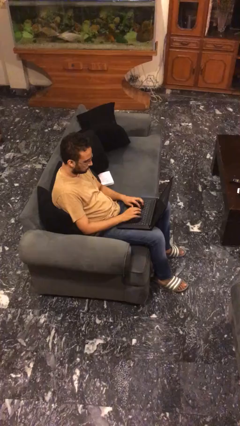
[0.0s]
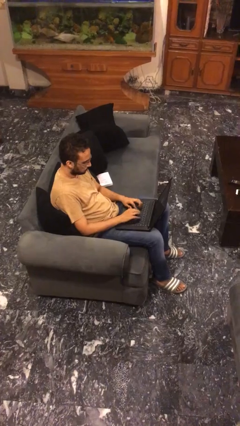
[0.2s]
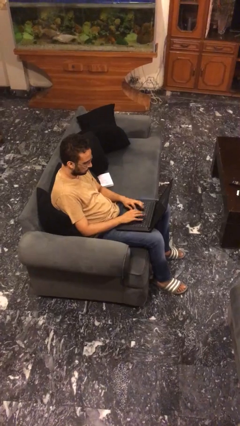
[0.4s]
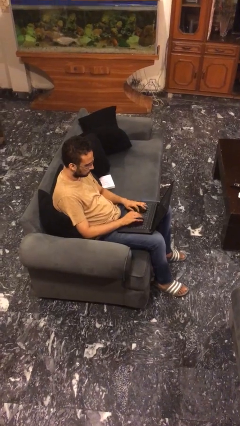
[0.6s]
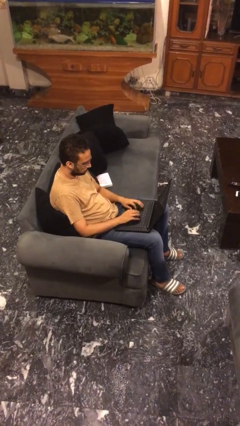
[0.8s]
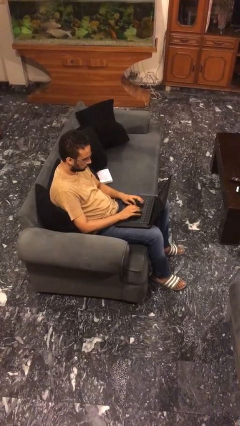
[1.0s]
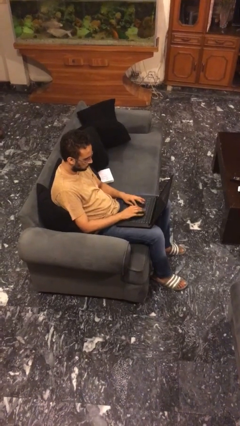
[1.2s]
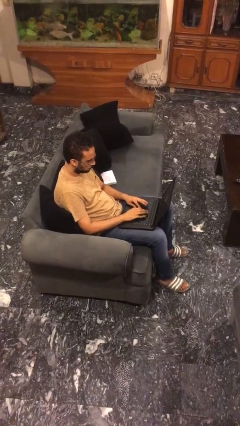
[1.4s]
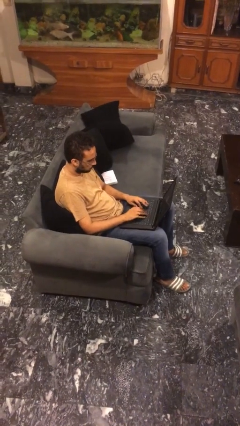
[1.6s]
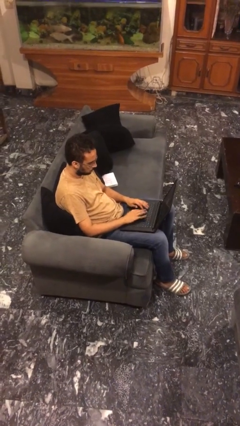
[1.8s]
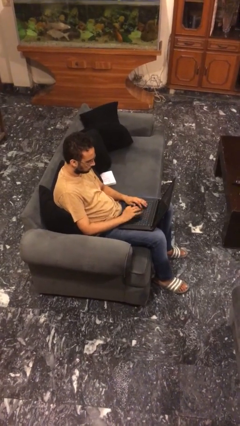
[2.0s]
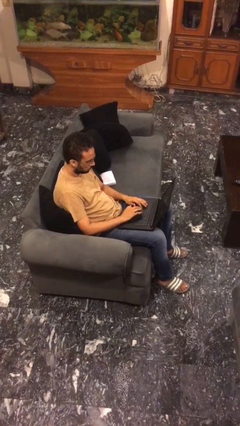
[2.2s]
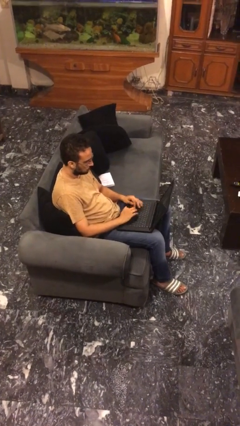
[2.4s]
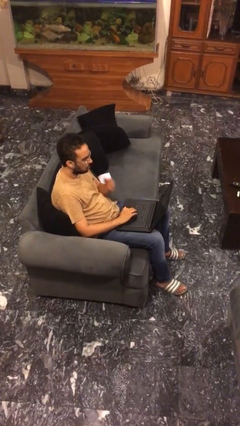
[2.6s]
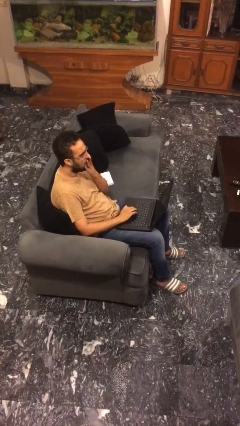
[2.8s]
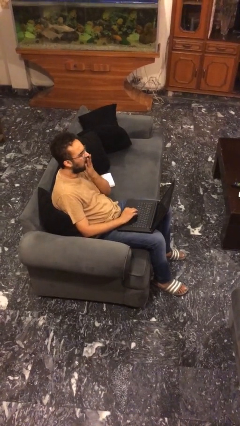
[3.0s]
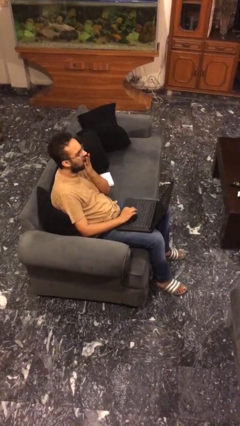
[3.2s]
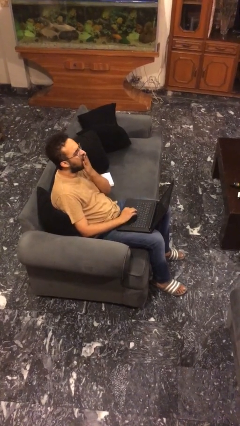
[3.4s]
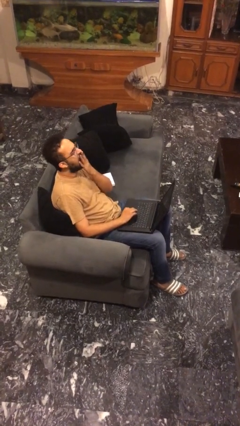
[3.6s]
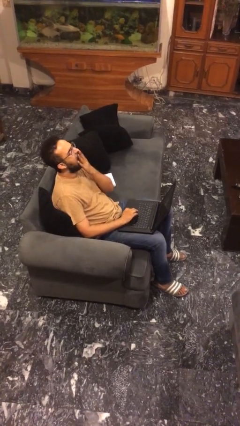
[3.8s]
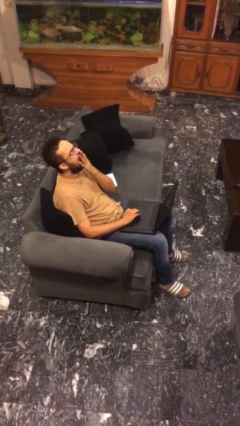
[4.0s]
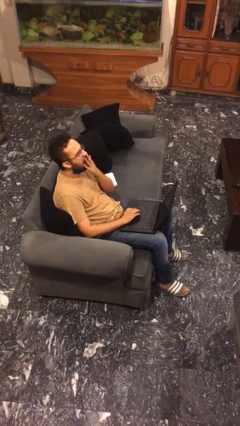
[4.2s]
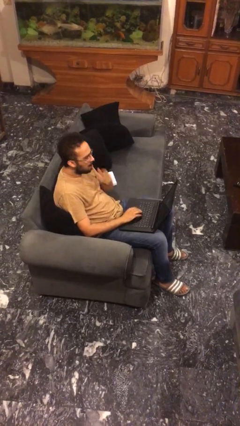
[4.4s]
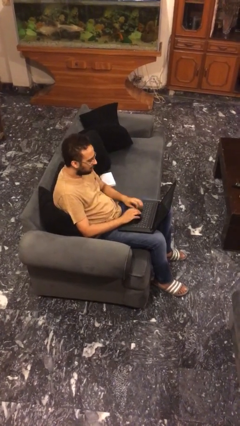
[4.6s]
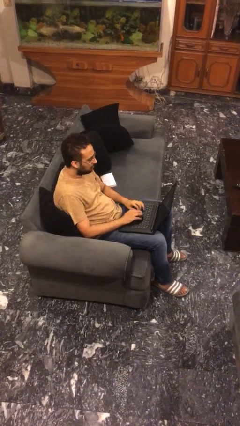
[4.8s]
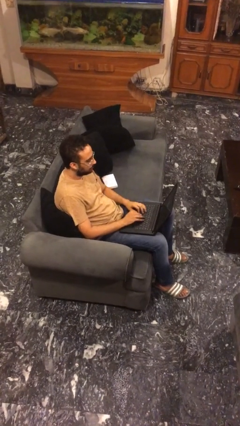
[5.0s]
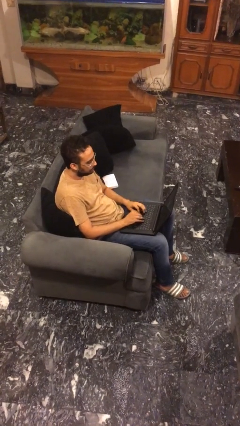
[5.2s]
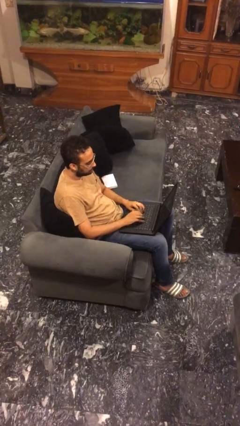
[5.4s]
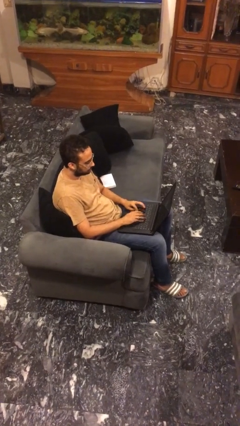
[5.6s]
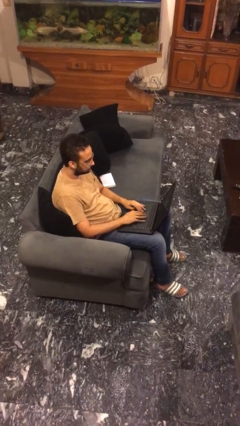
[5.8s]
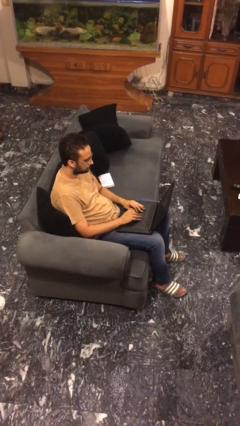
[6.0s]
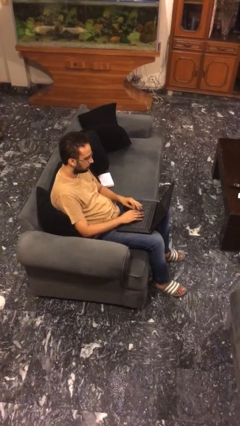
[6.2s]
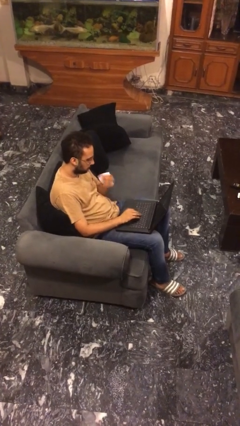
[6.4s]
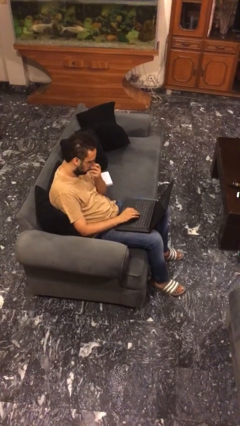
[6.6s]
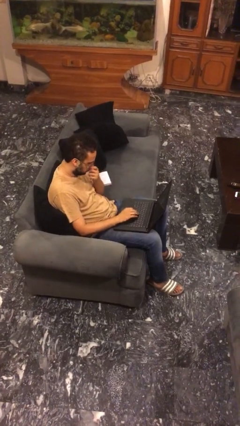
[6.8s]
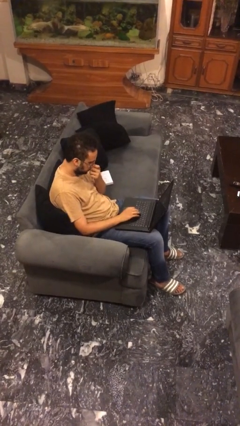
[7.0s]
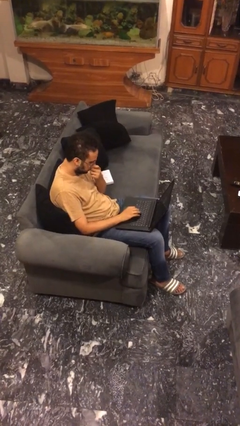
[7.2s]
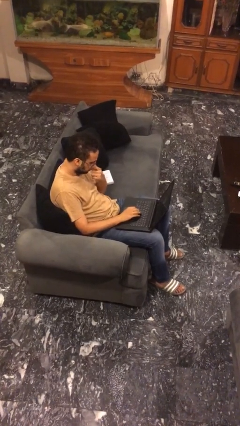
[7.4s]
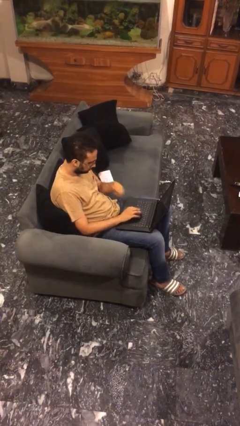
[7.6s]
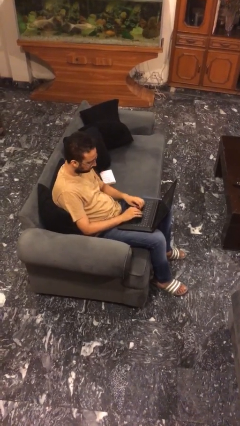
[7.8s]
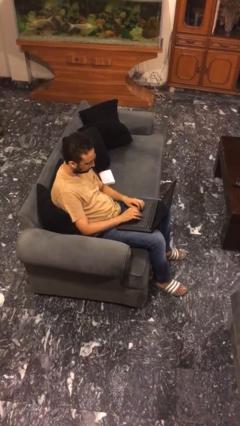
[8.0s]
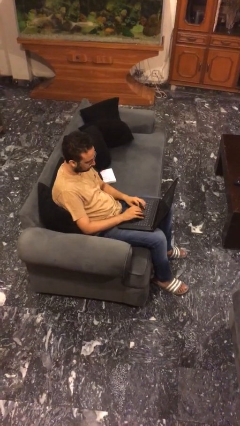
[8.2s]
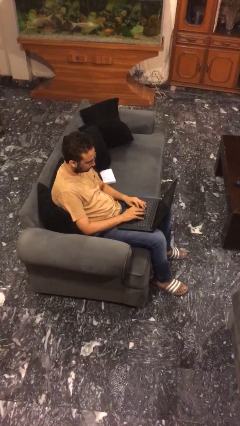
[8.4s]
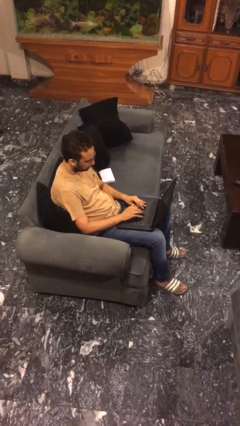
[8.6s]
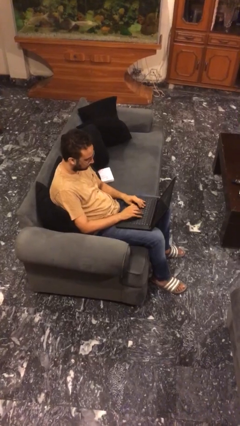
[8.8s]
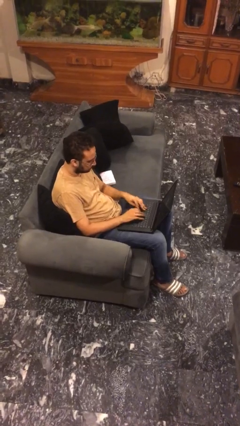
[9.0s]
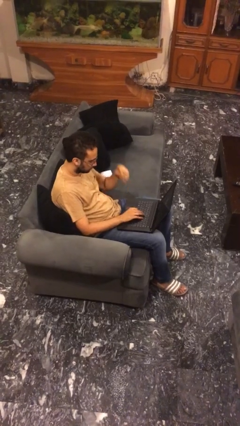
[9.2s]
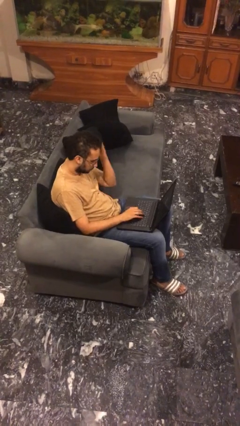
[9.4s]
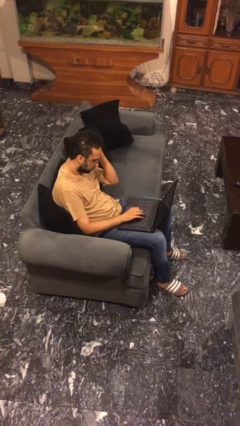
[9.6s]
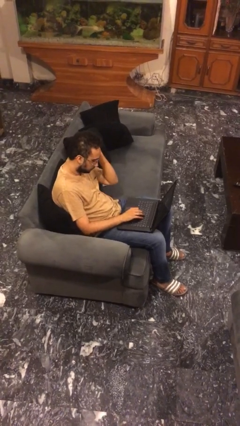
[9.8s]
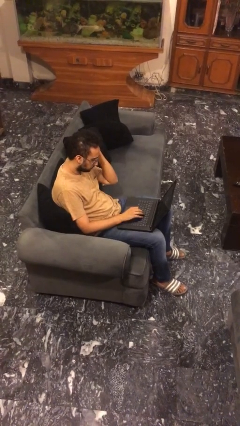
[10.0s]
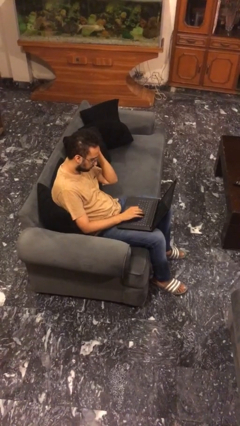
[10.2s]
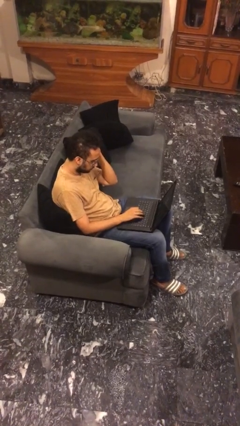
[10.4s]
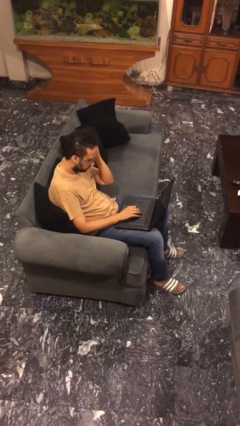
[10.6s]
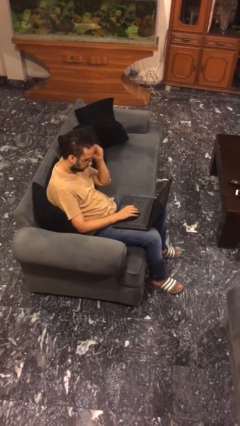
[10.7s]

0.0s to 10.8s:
person interacts with laptop

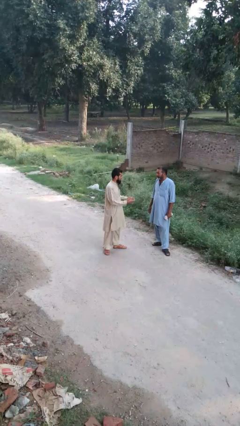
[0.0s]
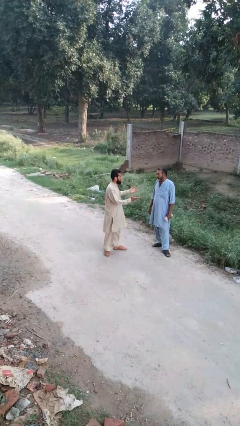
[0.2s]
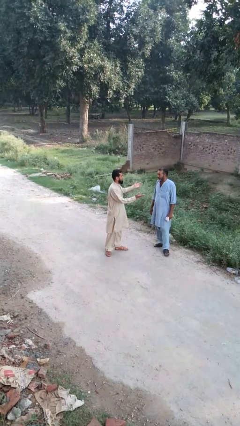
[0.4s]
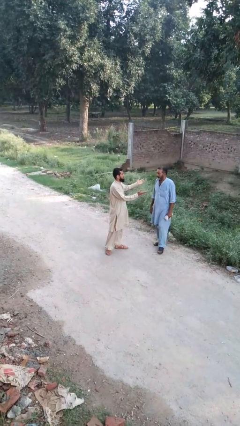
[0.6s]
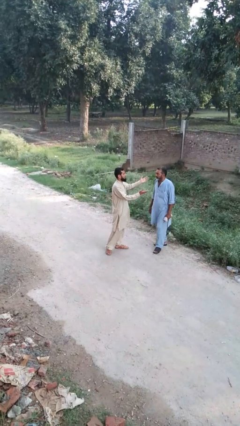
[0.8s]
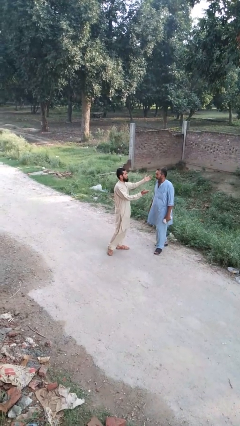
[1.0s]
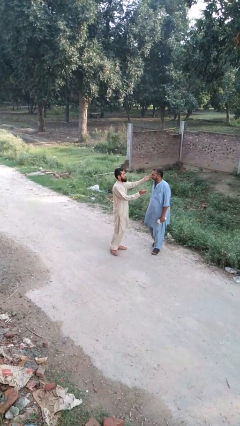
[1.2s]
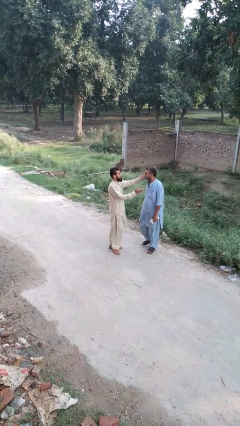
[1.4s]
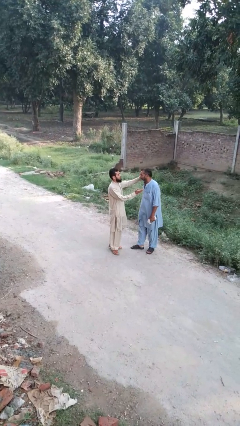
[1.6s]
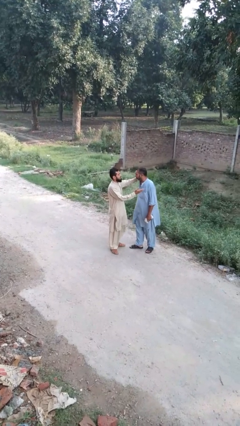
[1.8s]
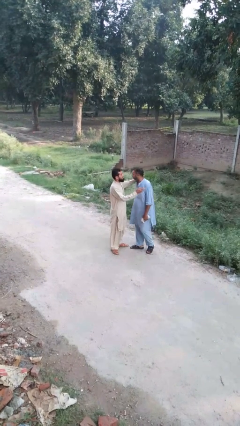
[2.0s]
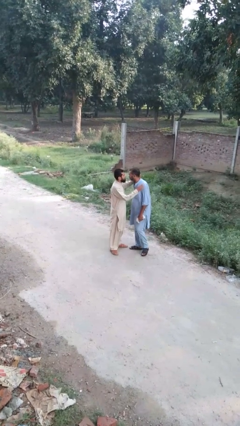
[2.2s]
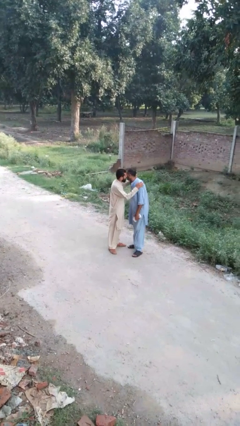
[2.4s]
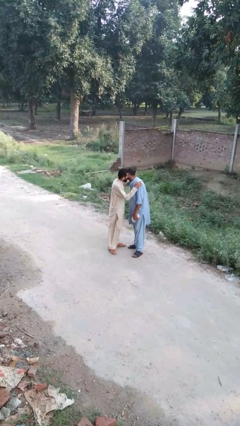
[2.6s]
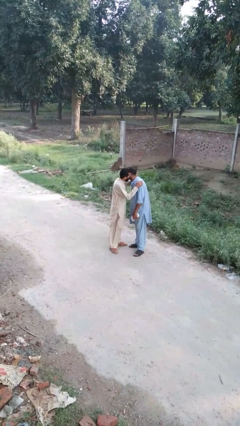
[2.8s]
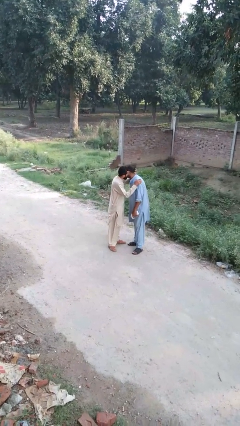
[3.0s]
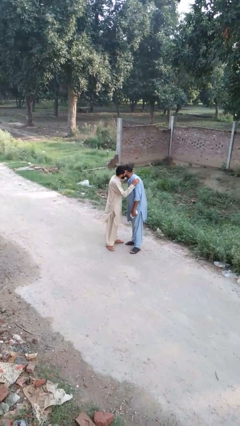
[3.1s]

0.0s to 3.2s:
person kisses cheek of person

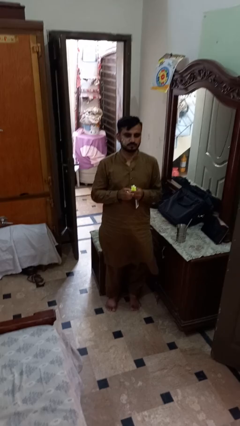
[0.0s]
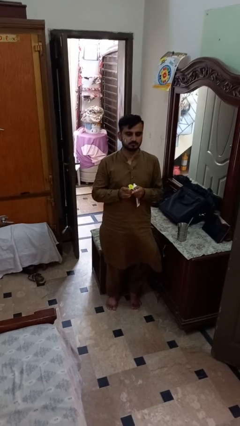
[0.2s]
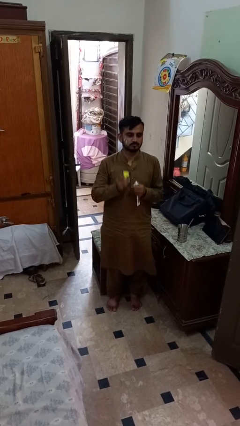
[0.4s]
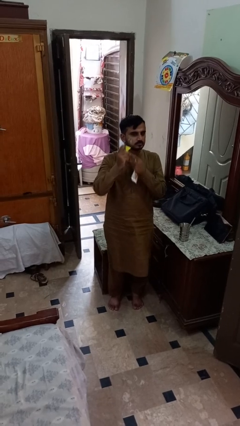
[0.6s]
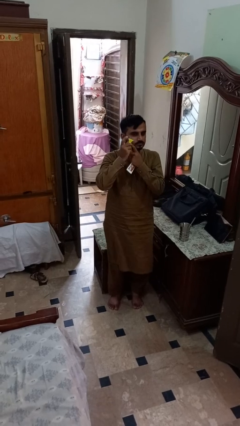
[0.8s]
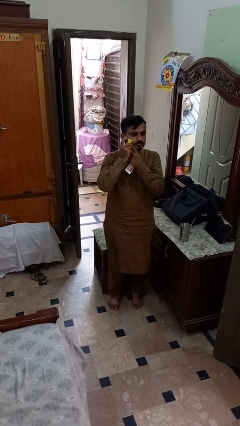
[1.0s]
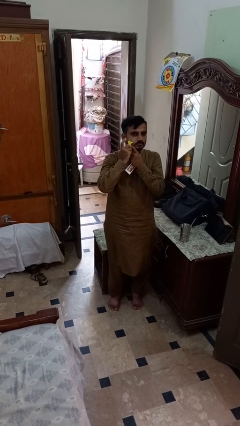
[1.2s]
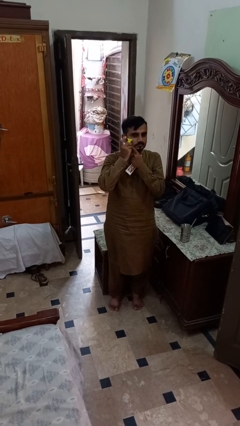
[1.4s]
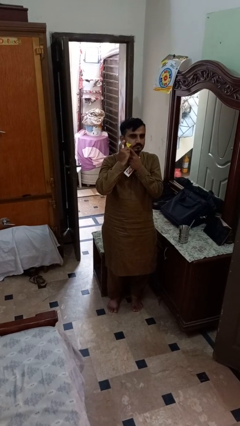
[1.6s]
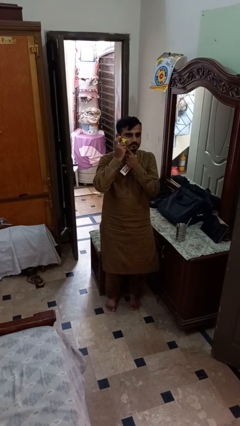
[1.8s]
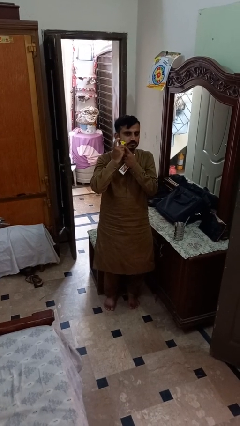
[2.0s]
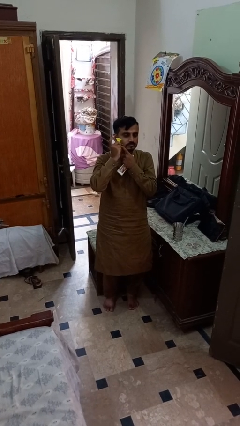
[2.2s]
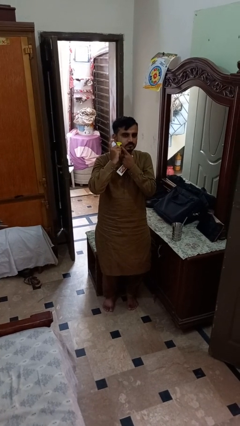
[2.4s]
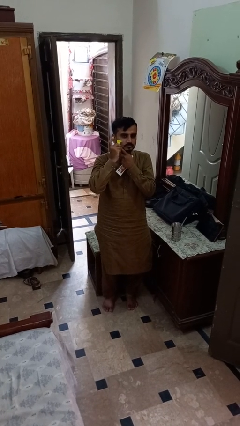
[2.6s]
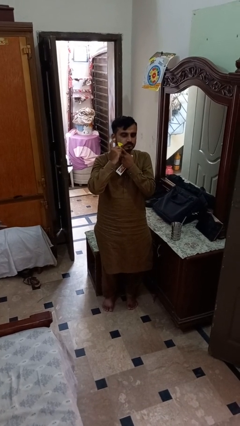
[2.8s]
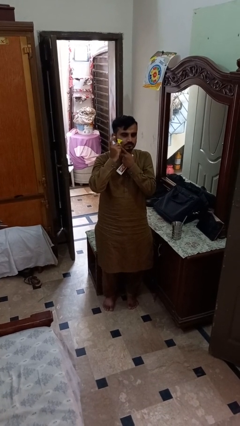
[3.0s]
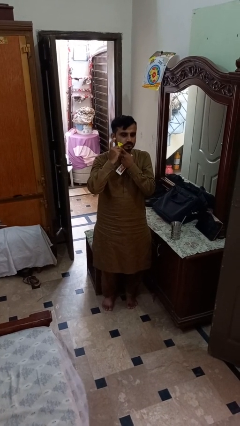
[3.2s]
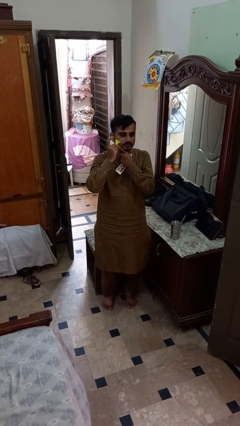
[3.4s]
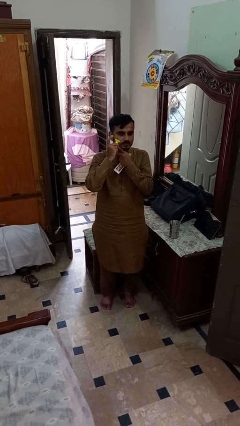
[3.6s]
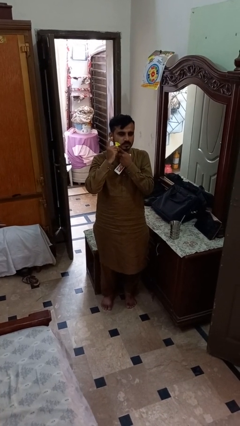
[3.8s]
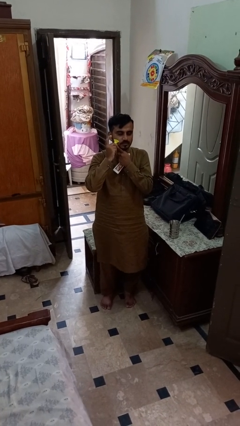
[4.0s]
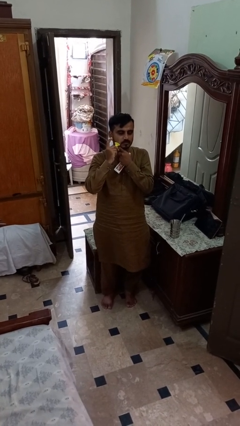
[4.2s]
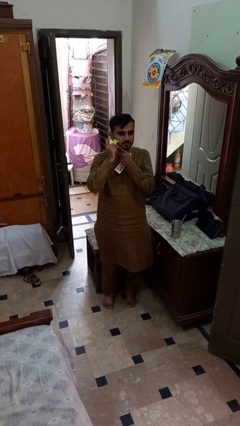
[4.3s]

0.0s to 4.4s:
person shaves face
